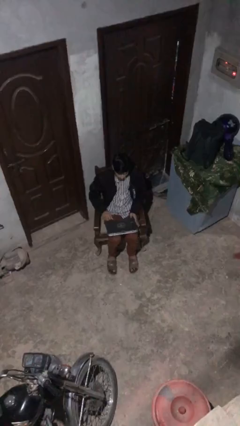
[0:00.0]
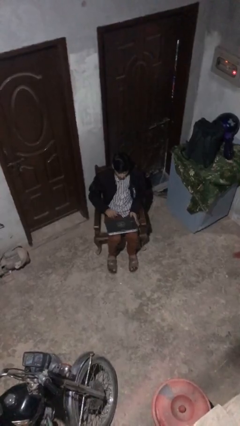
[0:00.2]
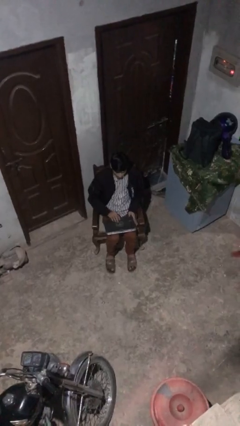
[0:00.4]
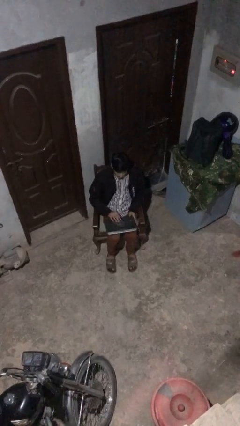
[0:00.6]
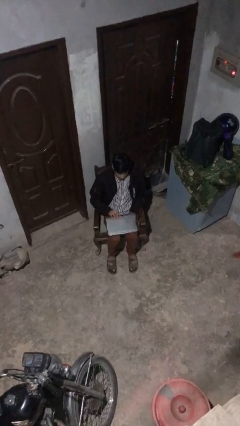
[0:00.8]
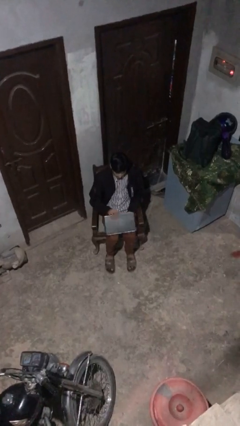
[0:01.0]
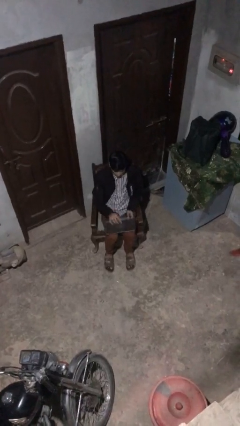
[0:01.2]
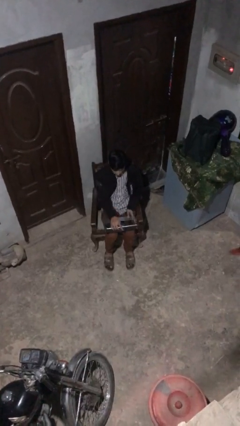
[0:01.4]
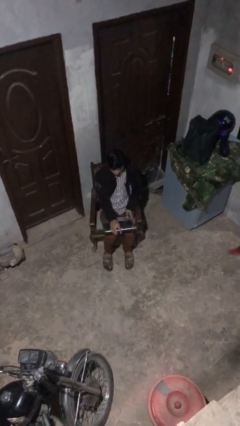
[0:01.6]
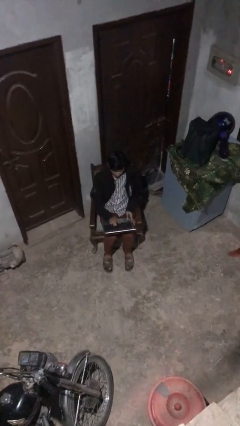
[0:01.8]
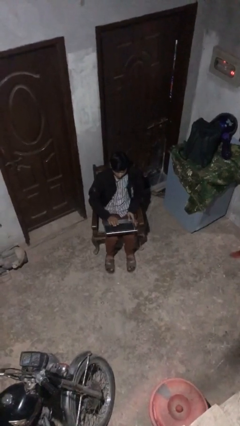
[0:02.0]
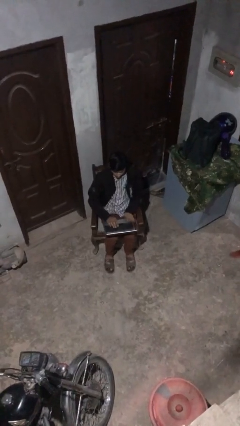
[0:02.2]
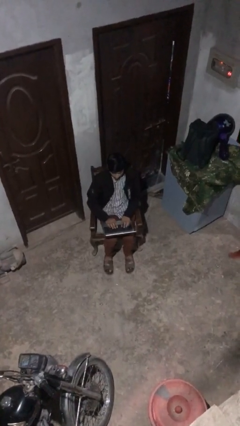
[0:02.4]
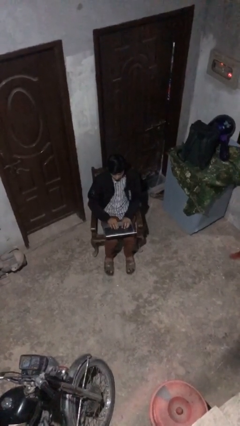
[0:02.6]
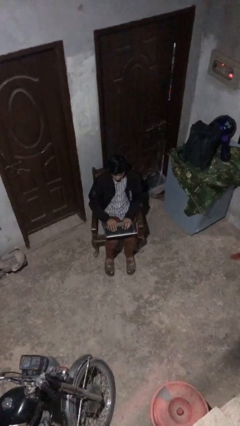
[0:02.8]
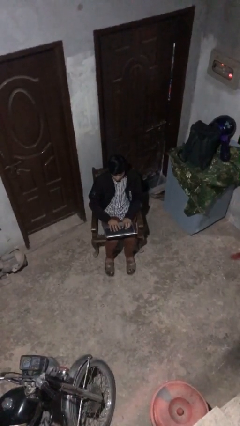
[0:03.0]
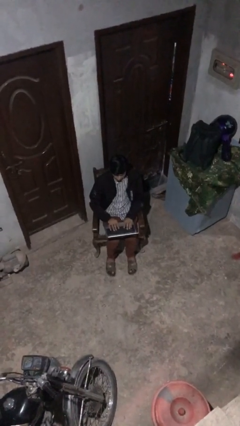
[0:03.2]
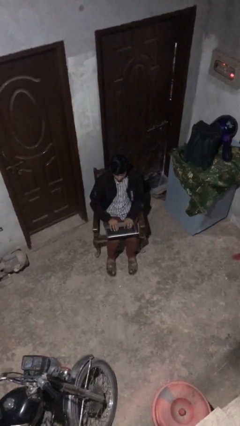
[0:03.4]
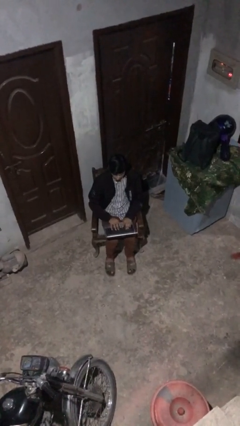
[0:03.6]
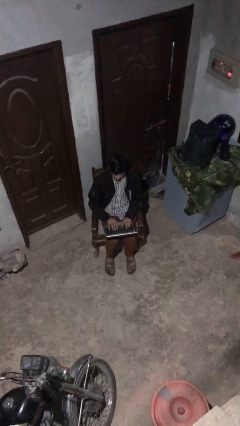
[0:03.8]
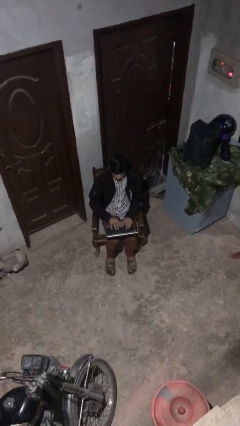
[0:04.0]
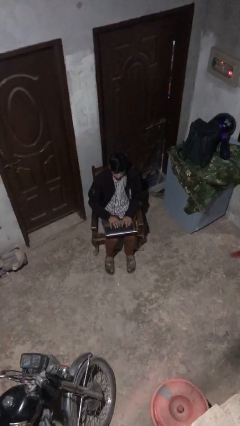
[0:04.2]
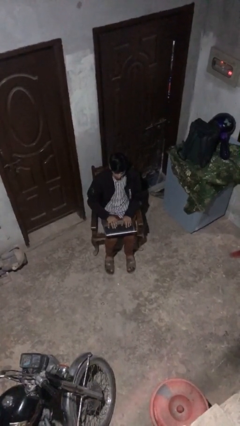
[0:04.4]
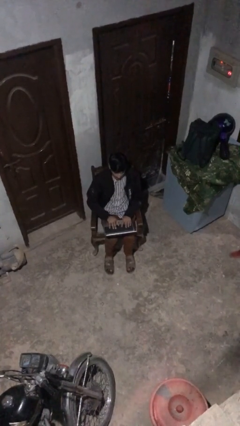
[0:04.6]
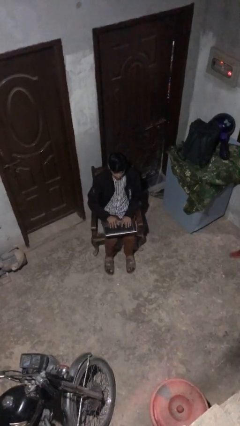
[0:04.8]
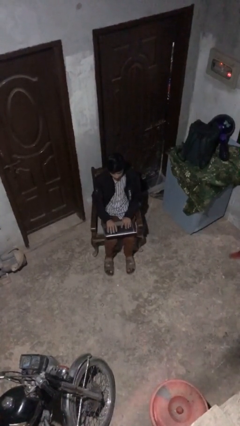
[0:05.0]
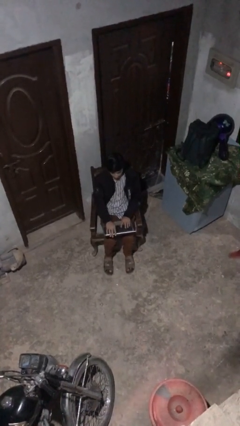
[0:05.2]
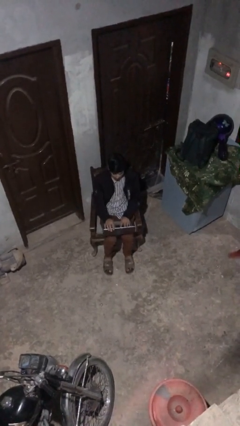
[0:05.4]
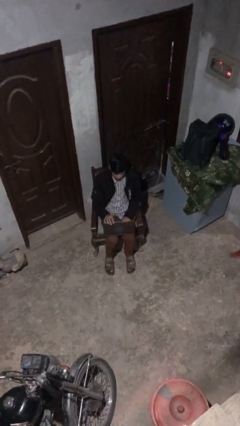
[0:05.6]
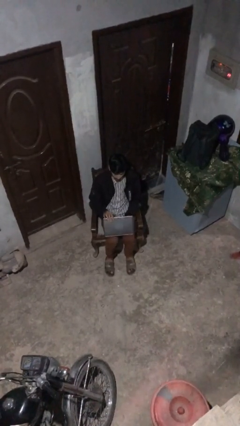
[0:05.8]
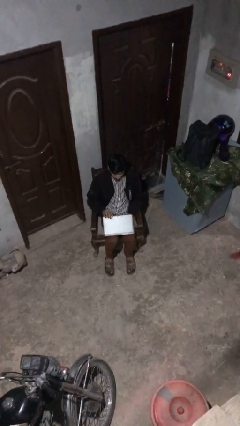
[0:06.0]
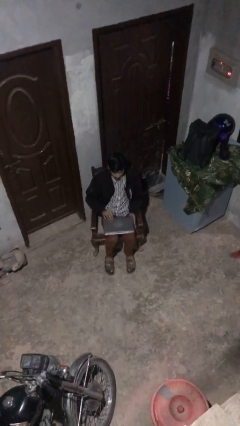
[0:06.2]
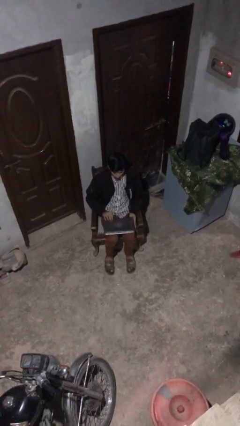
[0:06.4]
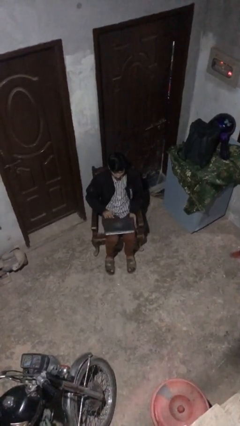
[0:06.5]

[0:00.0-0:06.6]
person interacts with laptop

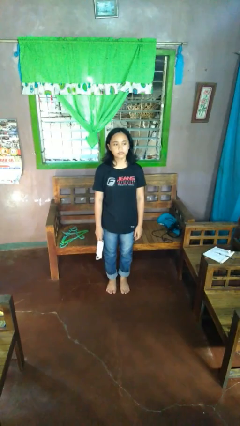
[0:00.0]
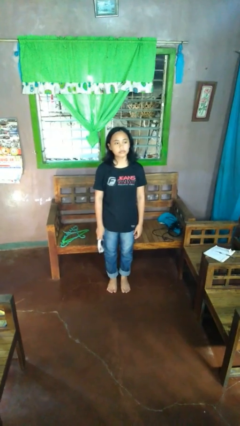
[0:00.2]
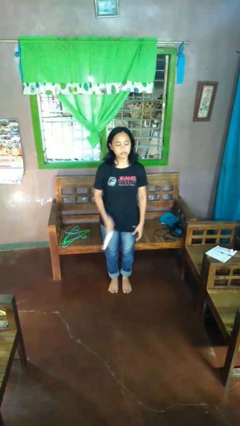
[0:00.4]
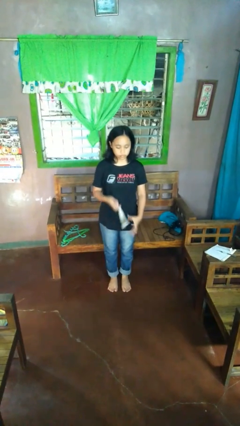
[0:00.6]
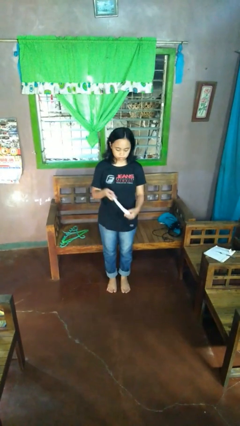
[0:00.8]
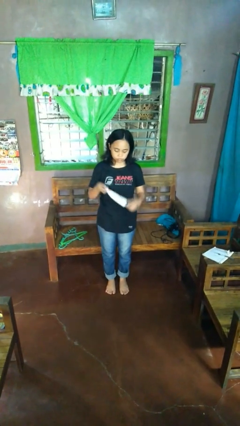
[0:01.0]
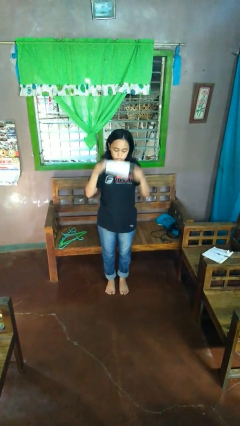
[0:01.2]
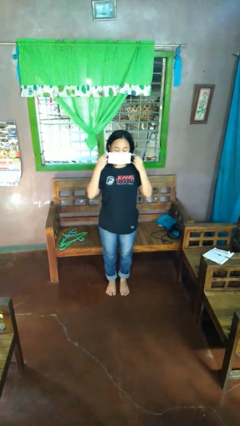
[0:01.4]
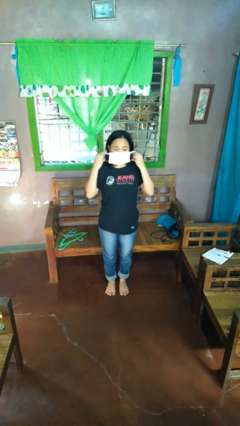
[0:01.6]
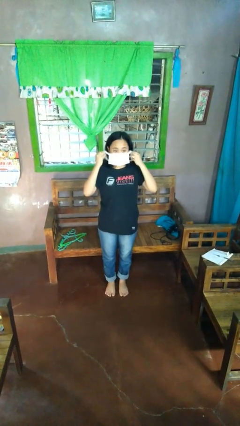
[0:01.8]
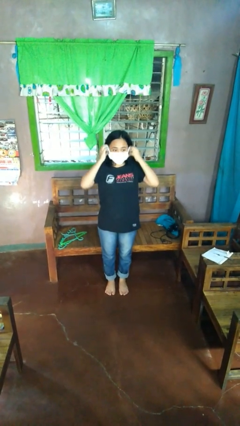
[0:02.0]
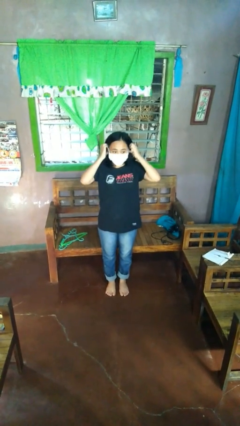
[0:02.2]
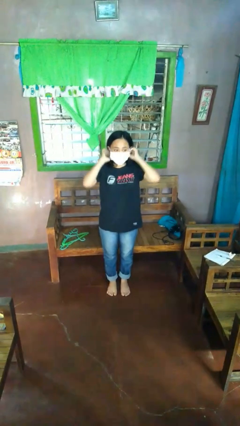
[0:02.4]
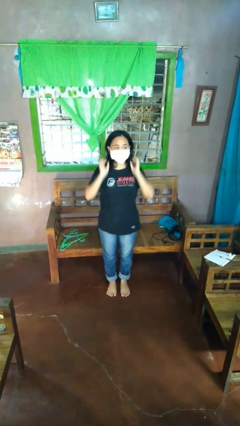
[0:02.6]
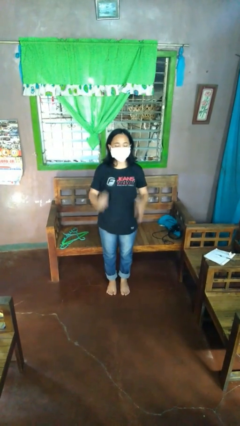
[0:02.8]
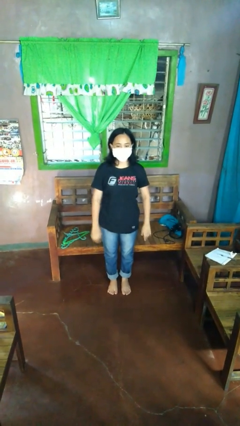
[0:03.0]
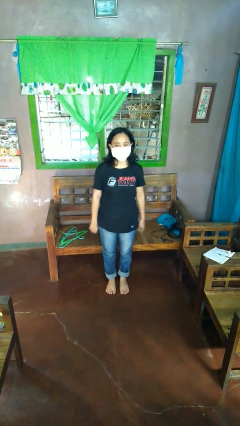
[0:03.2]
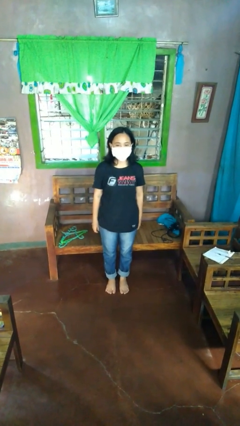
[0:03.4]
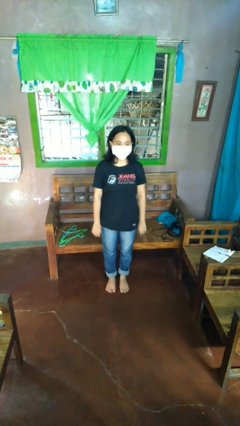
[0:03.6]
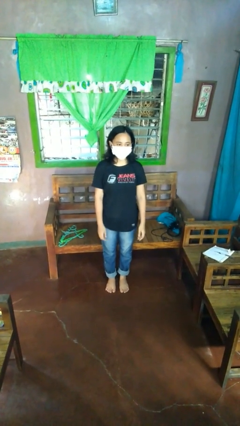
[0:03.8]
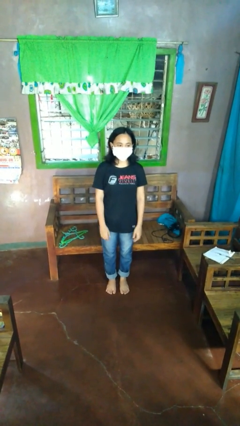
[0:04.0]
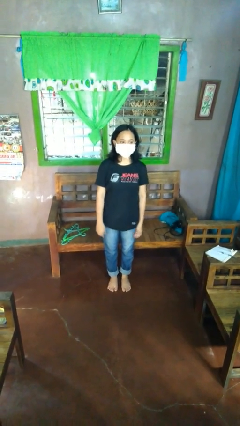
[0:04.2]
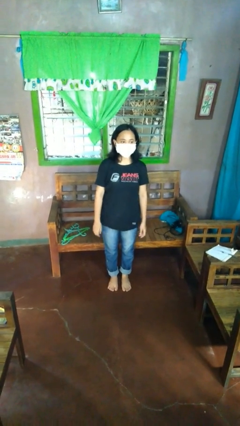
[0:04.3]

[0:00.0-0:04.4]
person puts on facemask

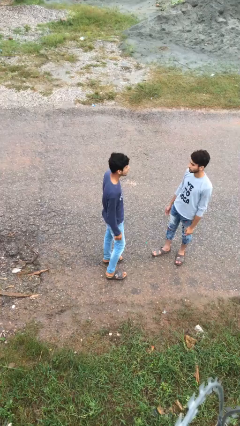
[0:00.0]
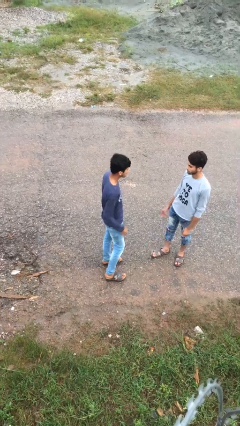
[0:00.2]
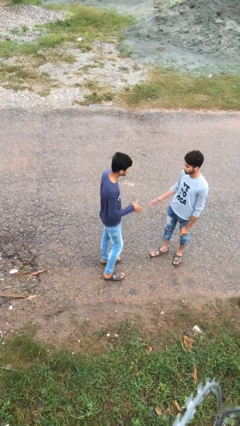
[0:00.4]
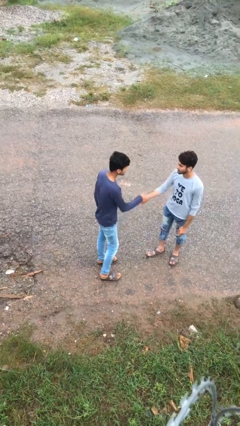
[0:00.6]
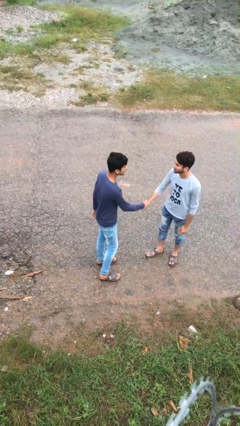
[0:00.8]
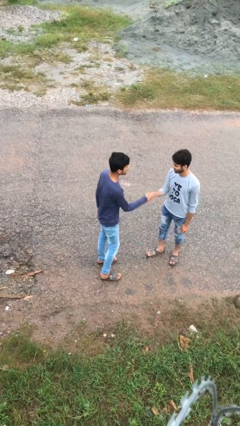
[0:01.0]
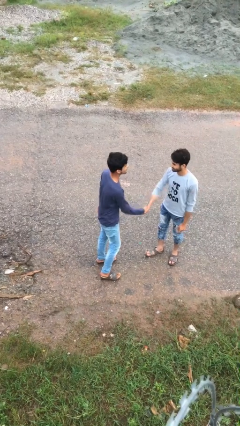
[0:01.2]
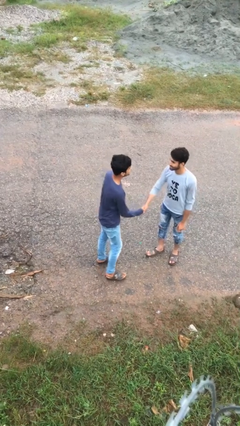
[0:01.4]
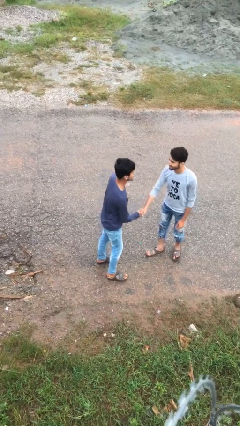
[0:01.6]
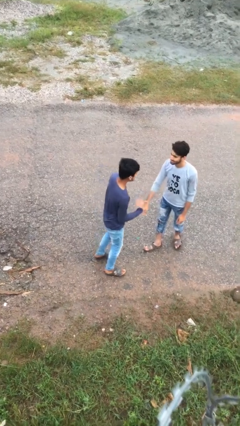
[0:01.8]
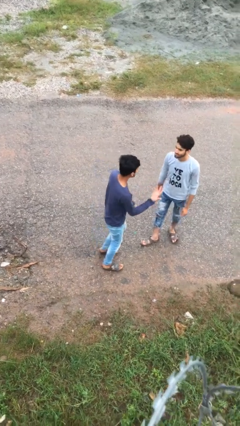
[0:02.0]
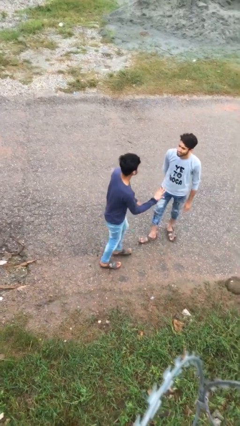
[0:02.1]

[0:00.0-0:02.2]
person shakes hand

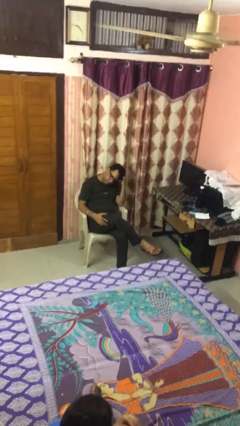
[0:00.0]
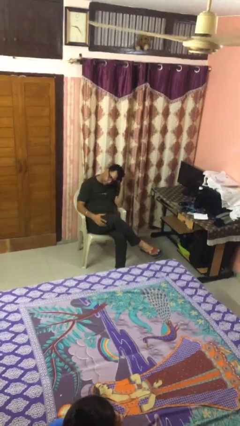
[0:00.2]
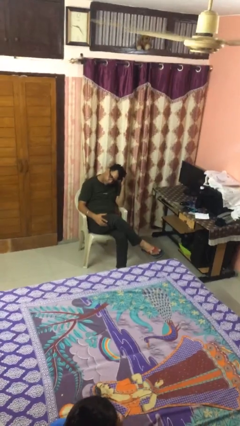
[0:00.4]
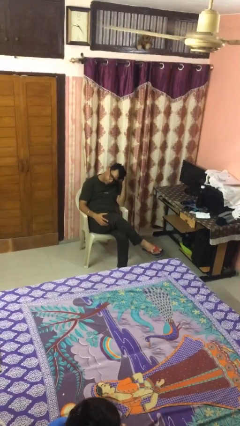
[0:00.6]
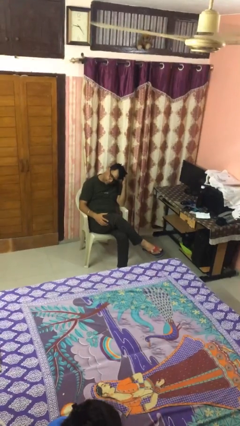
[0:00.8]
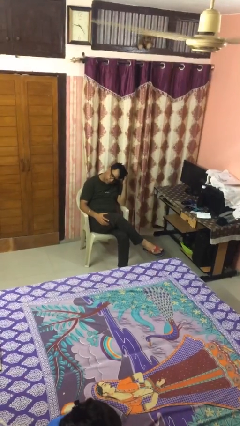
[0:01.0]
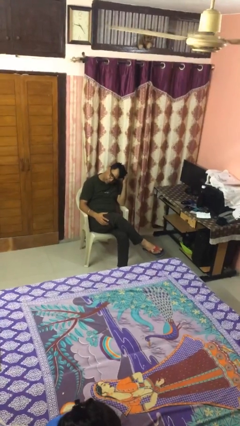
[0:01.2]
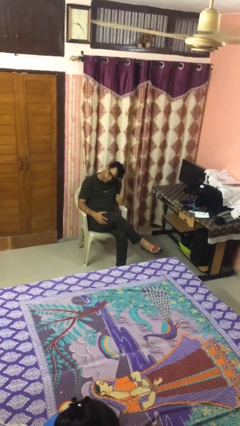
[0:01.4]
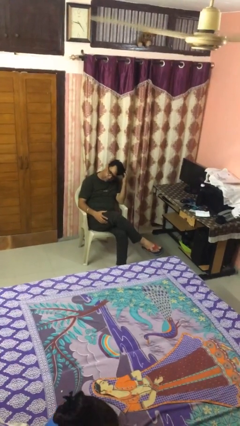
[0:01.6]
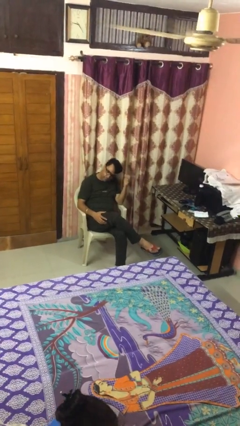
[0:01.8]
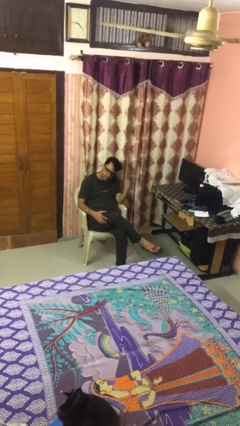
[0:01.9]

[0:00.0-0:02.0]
person scratches face

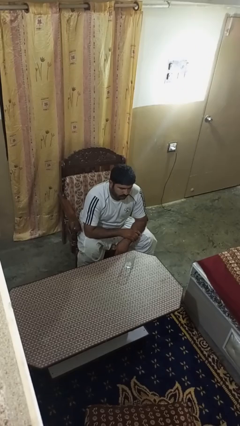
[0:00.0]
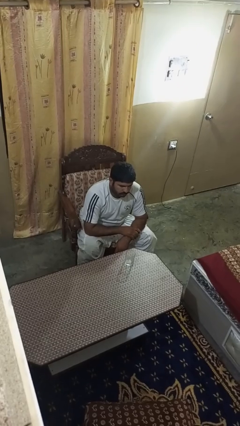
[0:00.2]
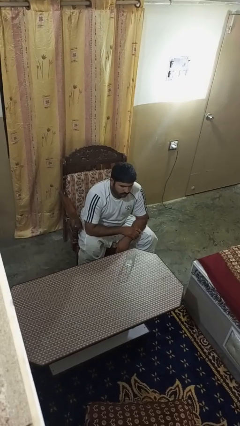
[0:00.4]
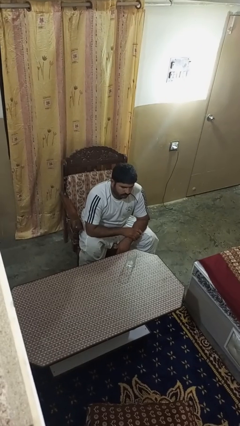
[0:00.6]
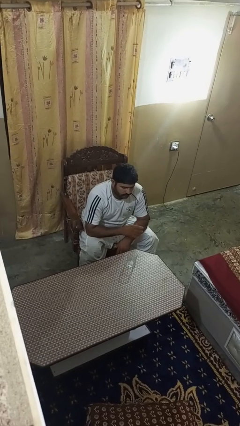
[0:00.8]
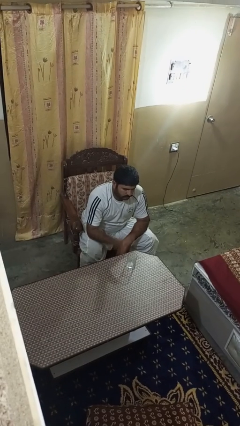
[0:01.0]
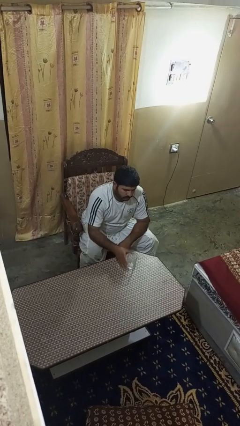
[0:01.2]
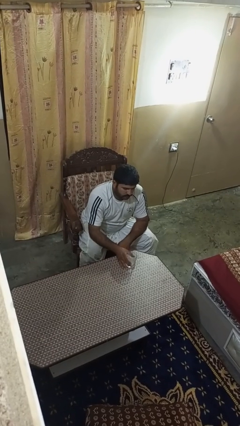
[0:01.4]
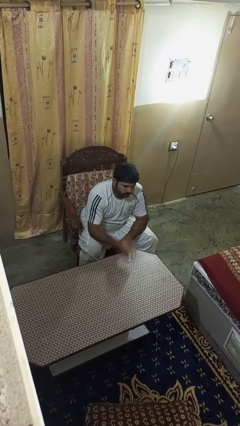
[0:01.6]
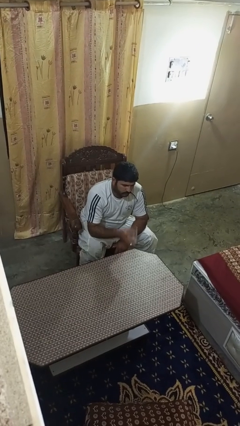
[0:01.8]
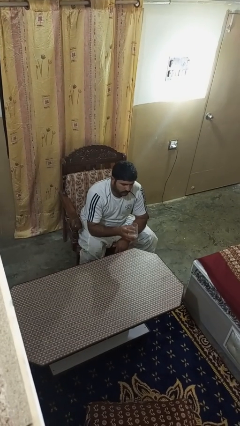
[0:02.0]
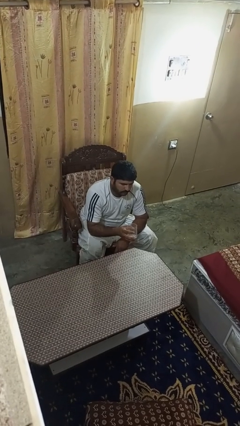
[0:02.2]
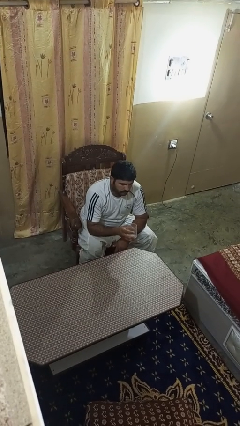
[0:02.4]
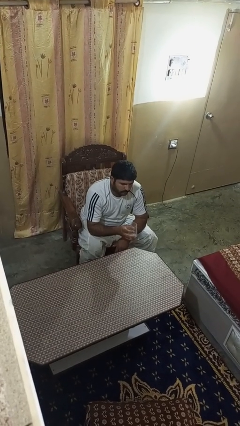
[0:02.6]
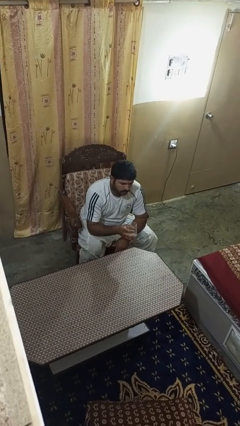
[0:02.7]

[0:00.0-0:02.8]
person picks up object from table
